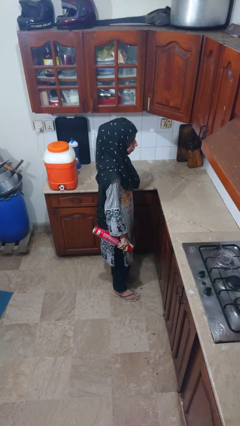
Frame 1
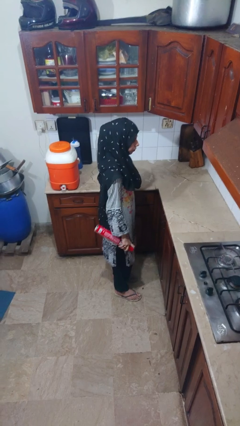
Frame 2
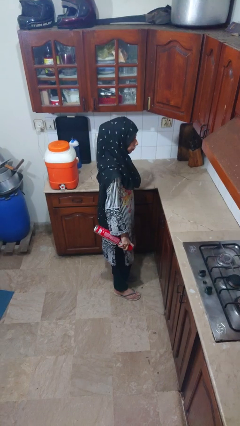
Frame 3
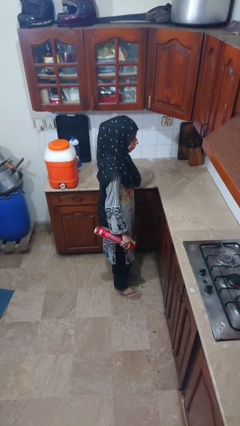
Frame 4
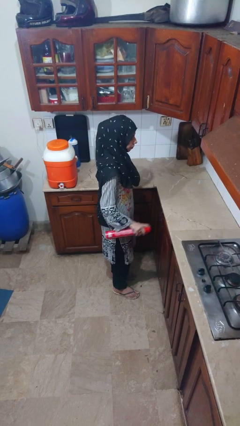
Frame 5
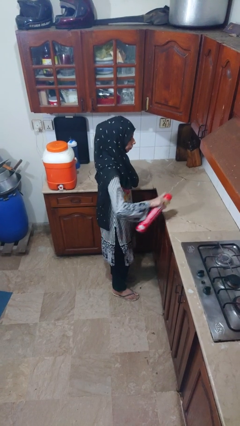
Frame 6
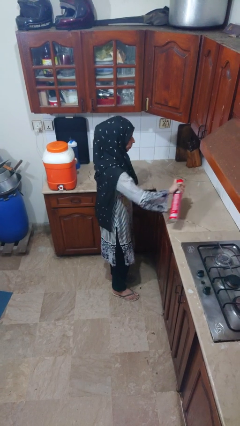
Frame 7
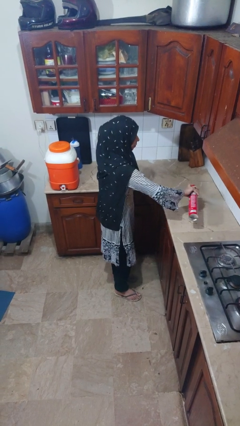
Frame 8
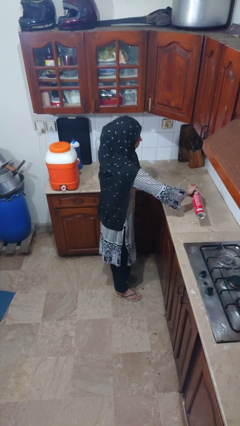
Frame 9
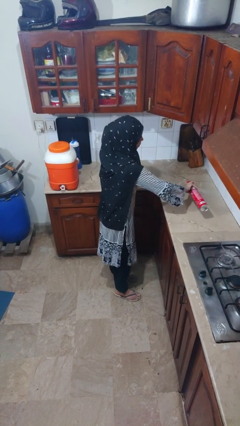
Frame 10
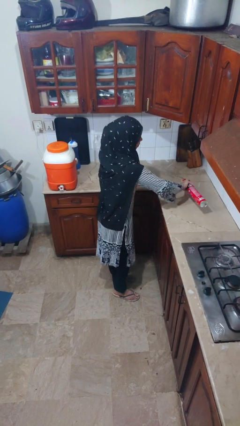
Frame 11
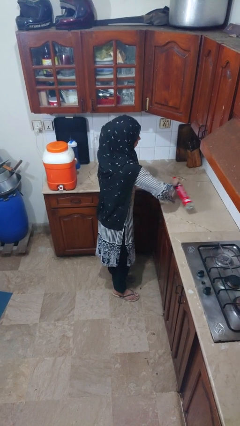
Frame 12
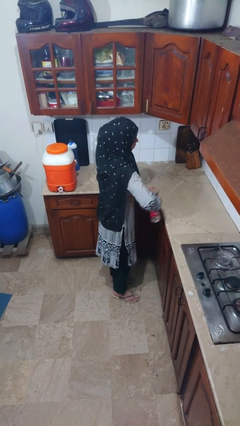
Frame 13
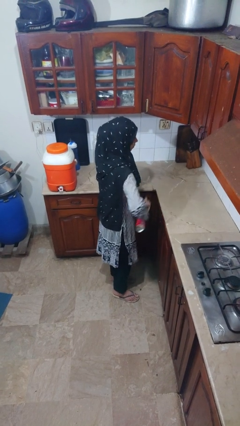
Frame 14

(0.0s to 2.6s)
person sprays from bottle

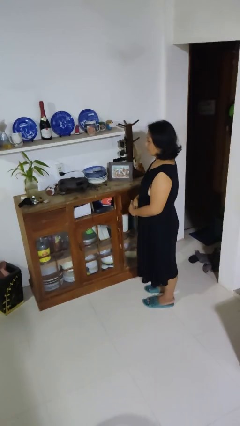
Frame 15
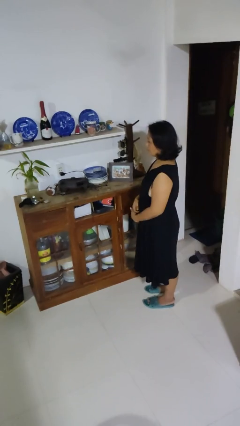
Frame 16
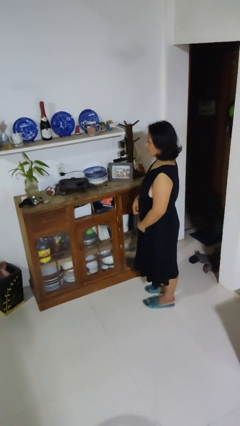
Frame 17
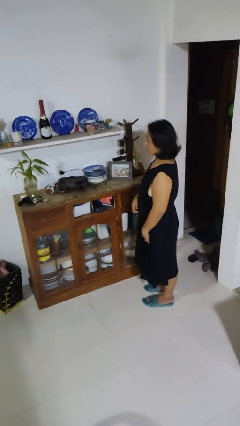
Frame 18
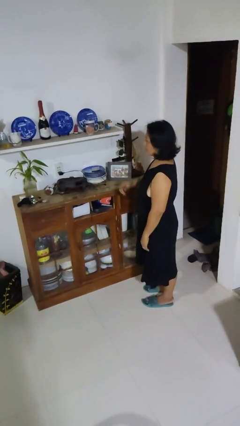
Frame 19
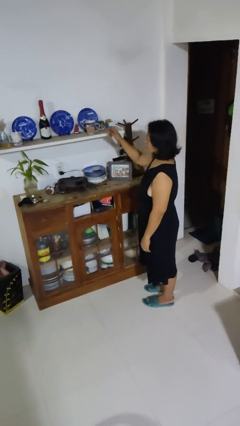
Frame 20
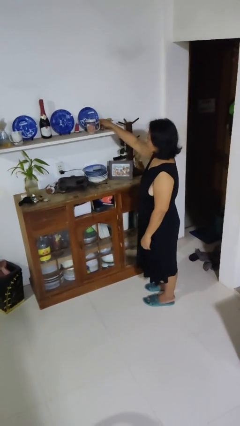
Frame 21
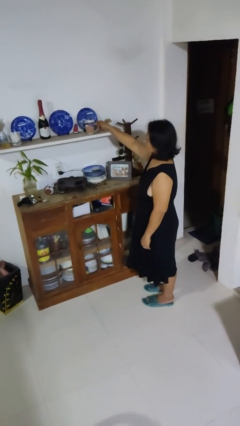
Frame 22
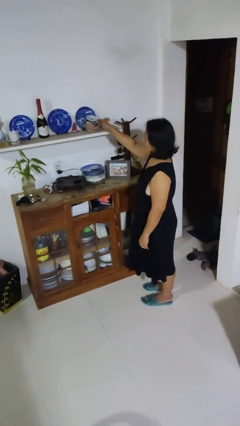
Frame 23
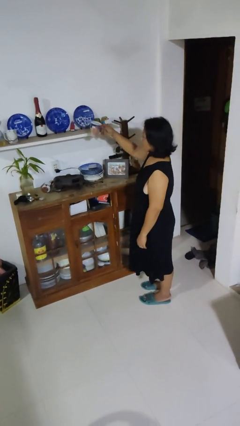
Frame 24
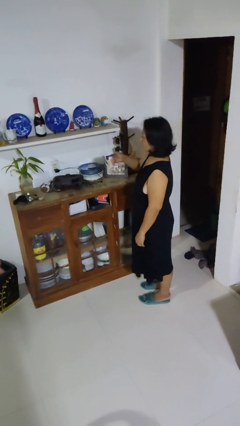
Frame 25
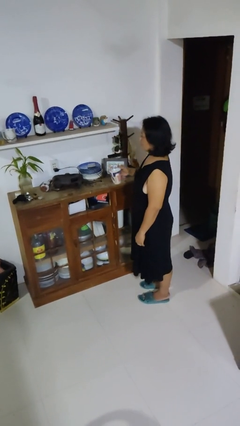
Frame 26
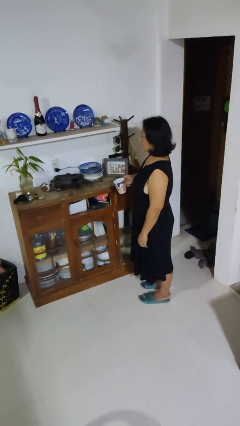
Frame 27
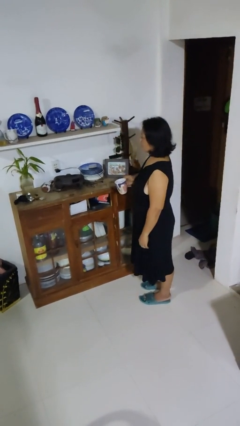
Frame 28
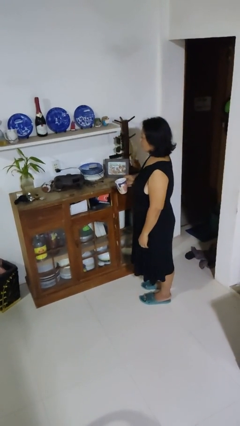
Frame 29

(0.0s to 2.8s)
person picks up object from shelf

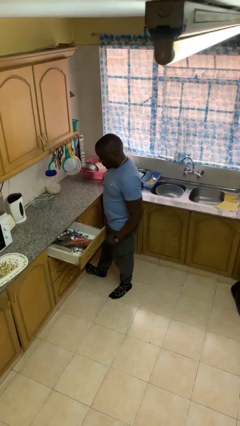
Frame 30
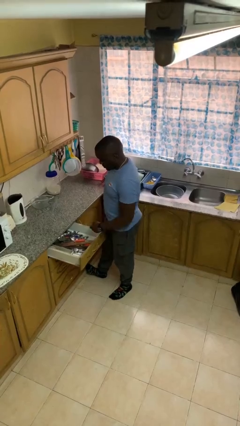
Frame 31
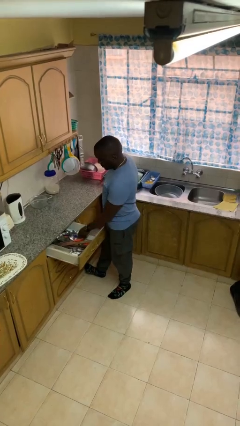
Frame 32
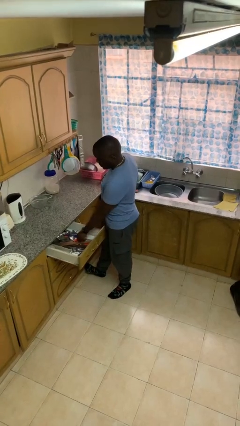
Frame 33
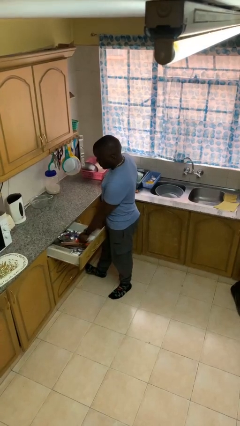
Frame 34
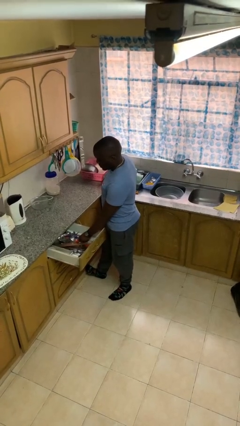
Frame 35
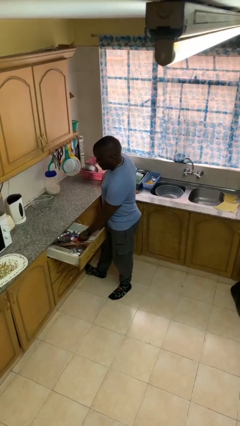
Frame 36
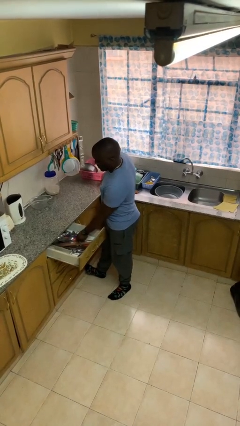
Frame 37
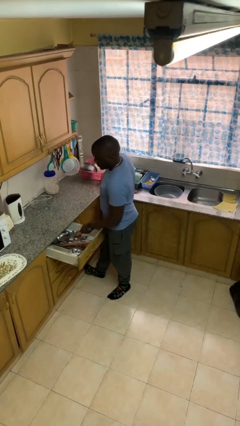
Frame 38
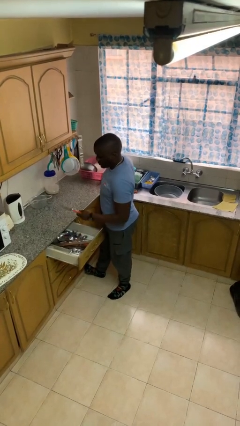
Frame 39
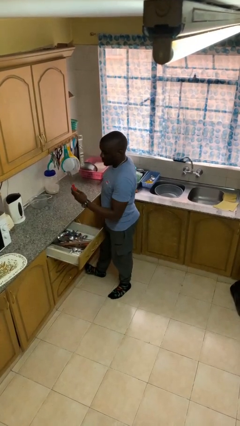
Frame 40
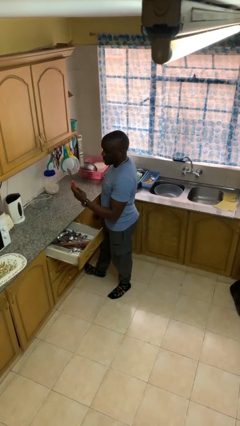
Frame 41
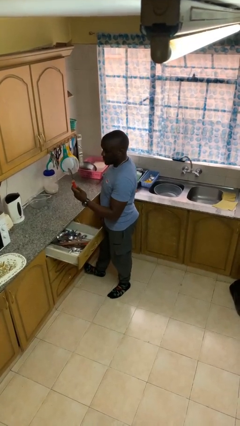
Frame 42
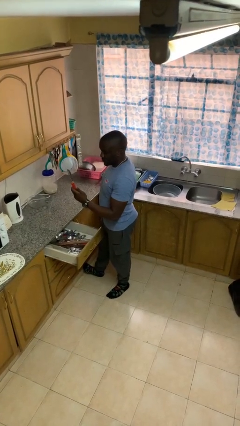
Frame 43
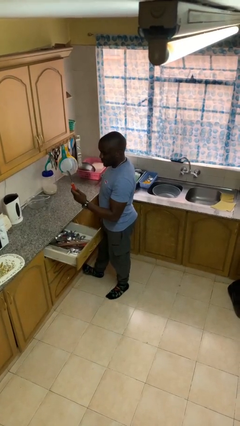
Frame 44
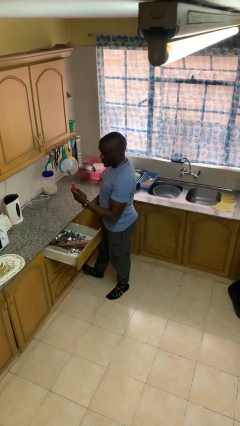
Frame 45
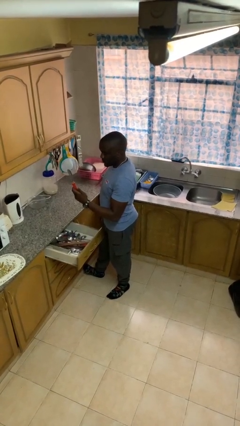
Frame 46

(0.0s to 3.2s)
person takes object from kitchen drawer

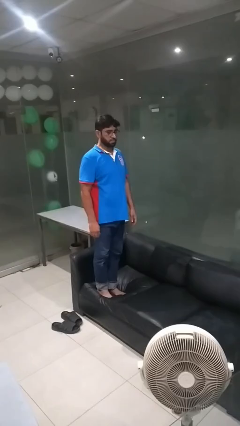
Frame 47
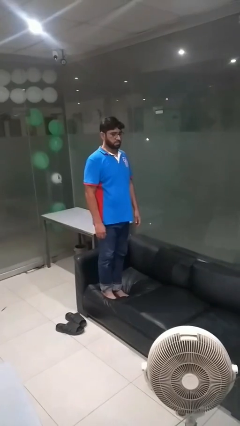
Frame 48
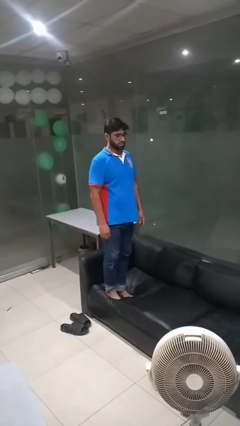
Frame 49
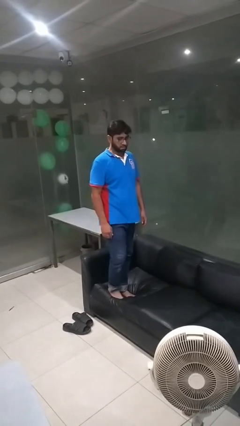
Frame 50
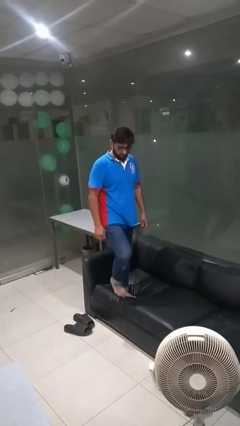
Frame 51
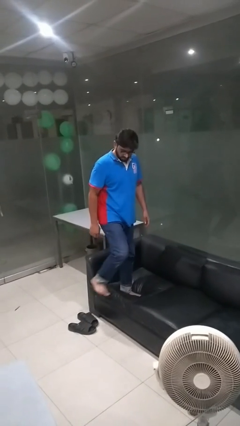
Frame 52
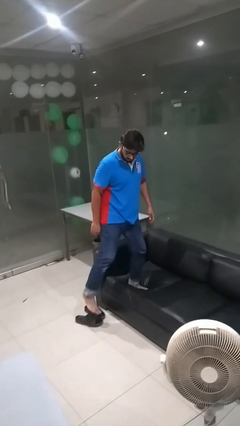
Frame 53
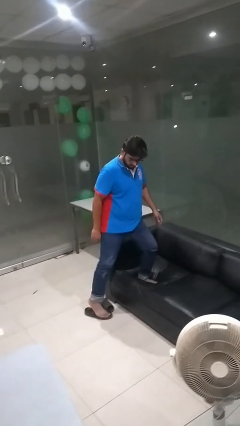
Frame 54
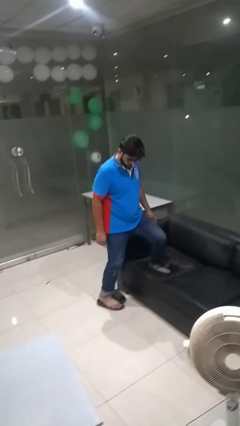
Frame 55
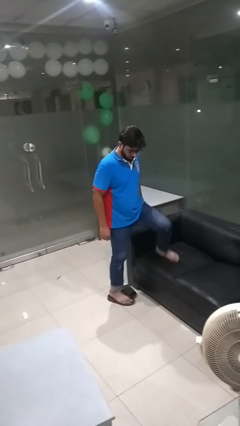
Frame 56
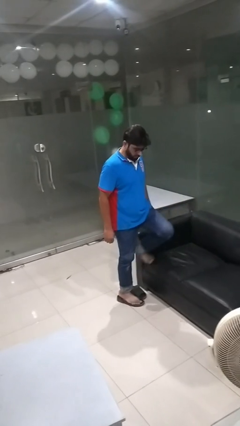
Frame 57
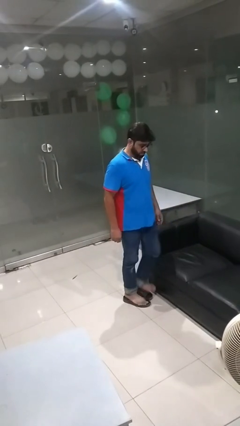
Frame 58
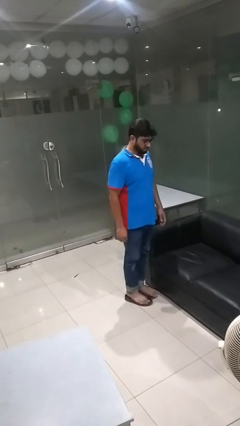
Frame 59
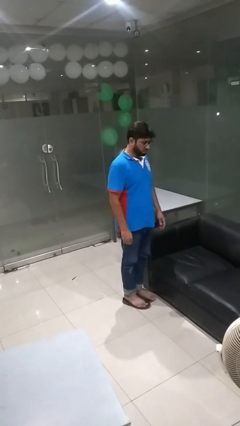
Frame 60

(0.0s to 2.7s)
person climbs off couch

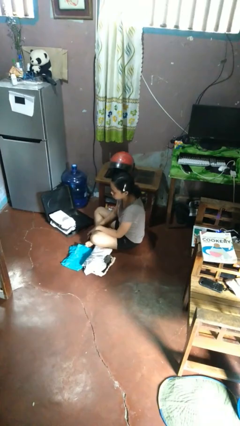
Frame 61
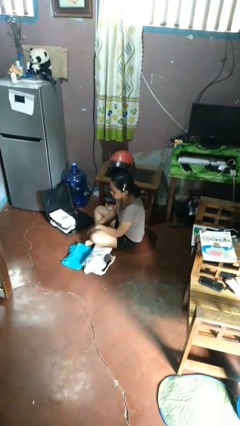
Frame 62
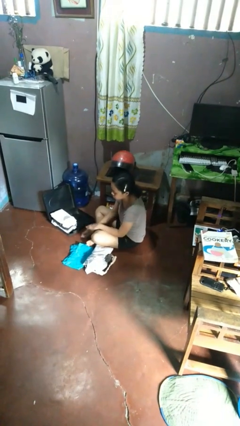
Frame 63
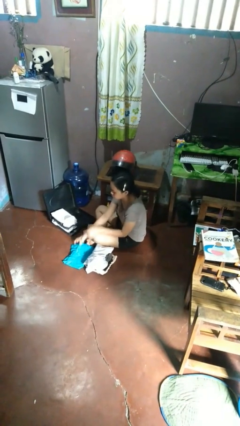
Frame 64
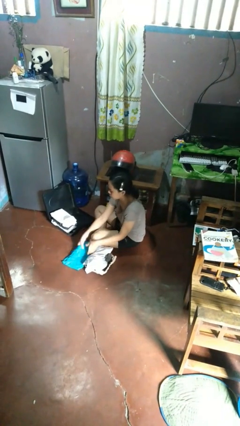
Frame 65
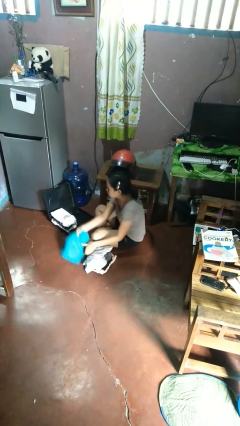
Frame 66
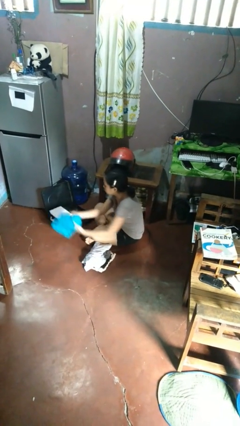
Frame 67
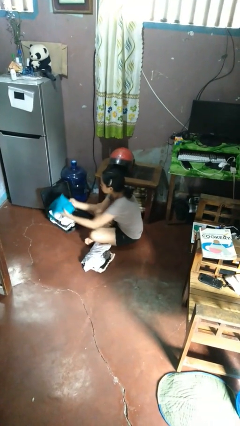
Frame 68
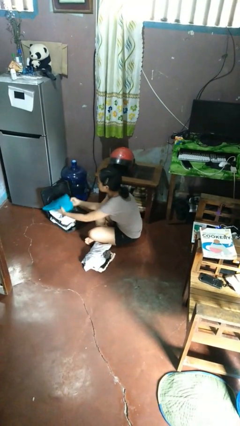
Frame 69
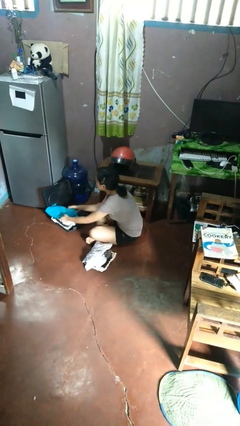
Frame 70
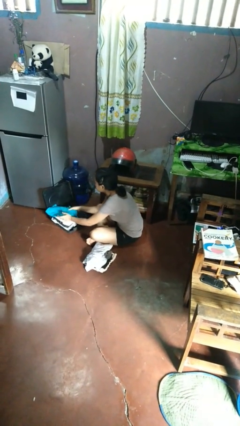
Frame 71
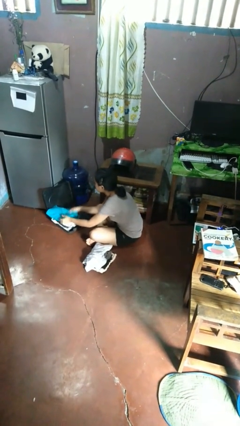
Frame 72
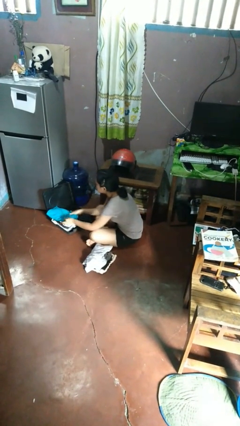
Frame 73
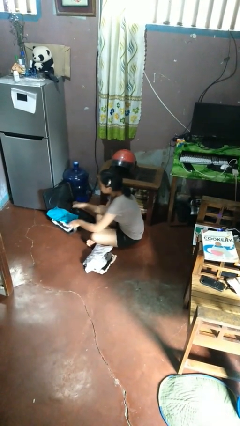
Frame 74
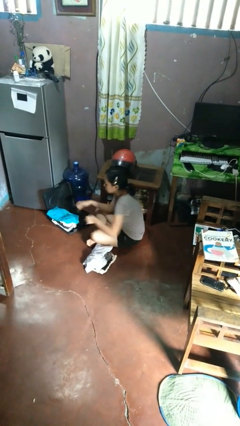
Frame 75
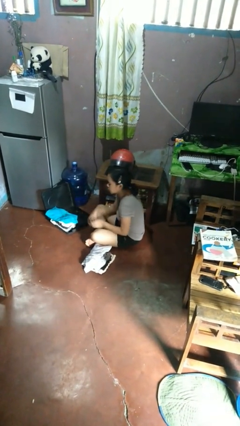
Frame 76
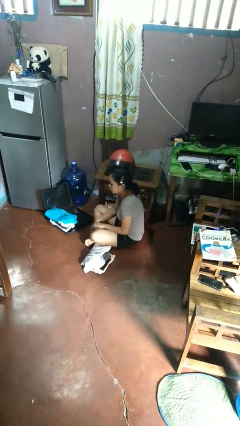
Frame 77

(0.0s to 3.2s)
person loads clothes into suitcase

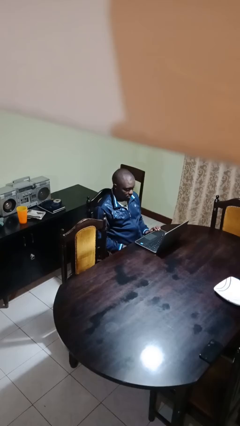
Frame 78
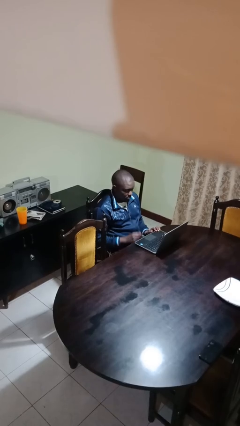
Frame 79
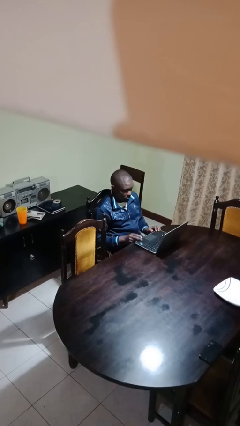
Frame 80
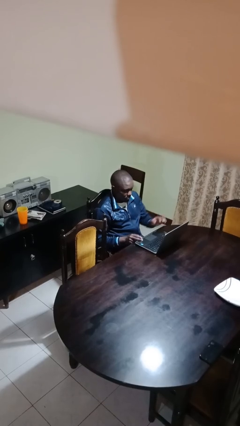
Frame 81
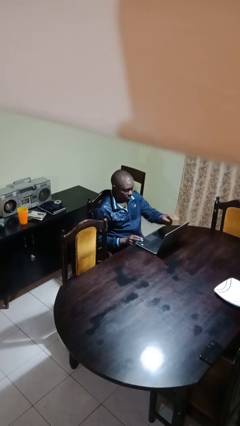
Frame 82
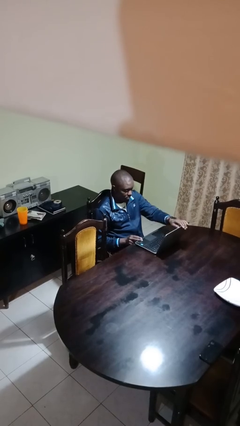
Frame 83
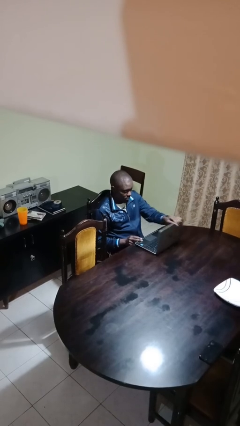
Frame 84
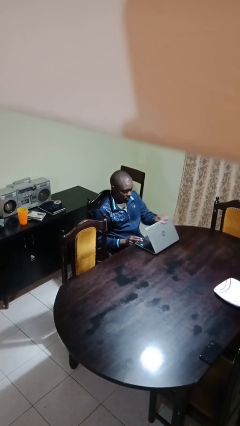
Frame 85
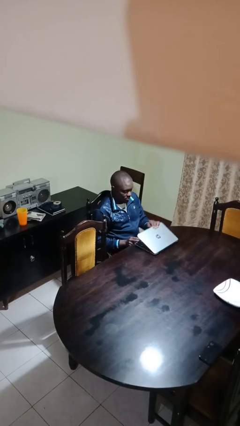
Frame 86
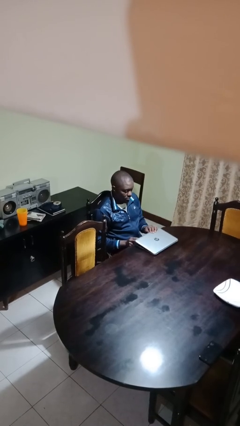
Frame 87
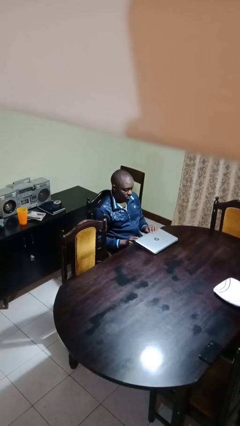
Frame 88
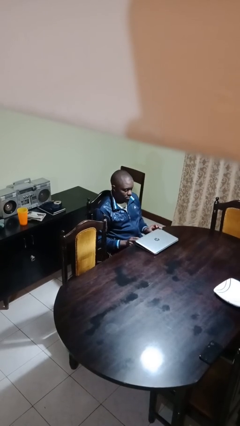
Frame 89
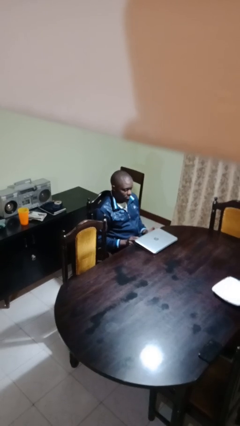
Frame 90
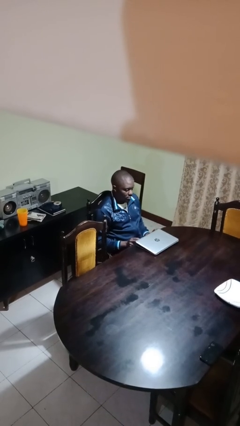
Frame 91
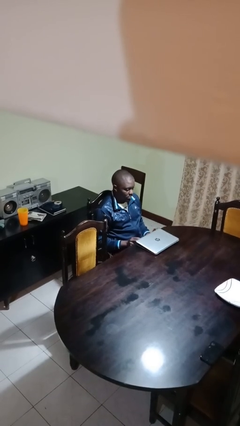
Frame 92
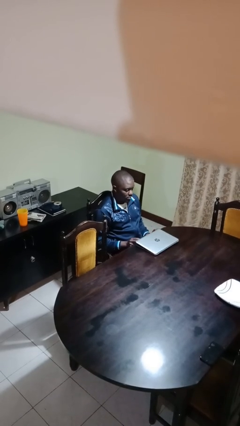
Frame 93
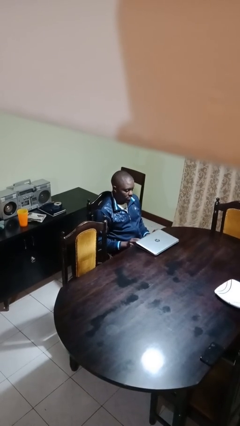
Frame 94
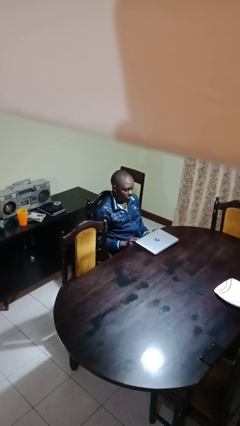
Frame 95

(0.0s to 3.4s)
person closes laptop
